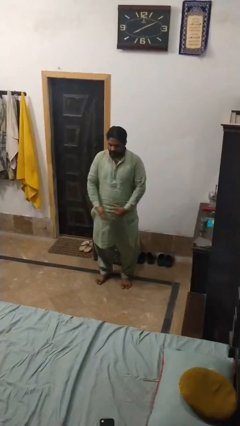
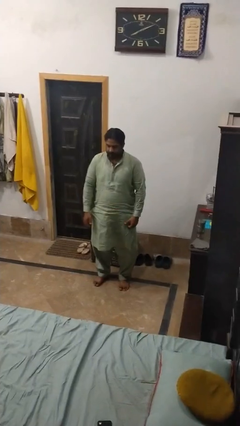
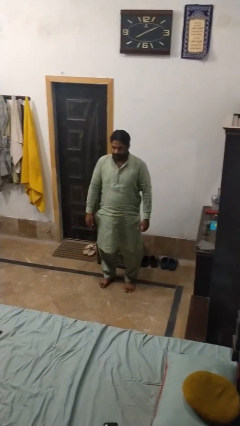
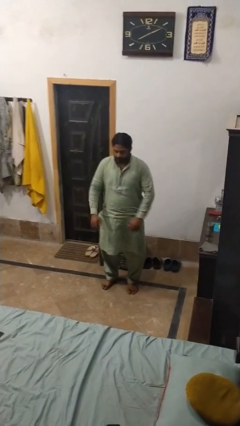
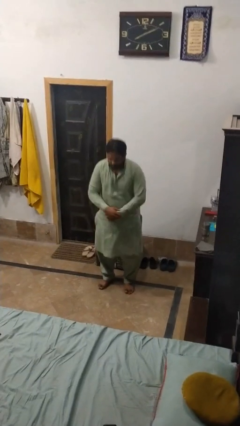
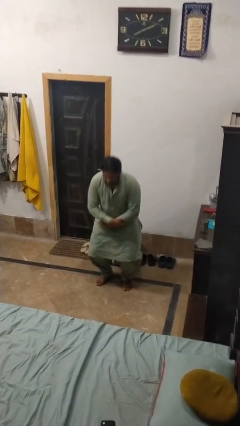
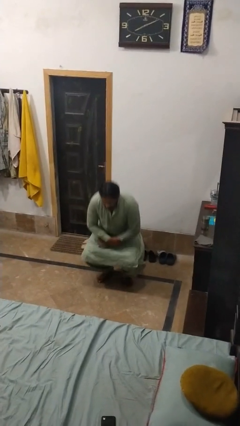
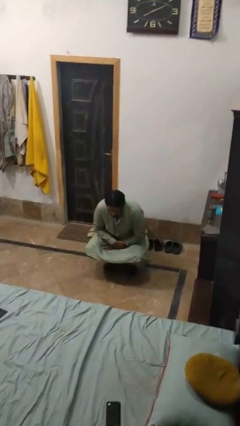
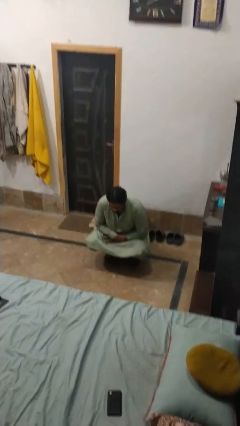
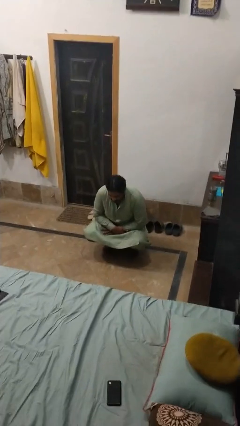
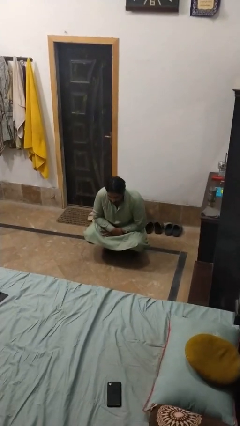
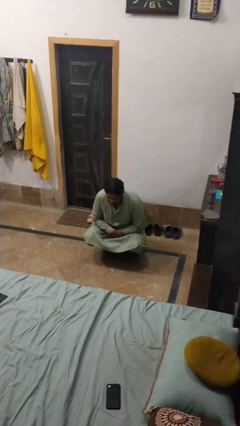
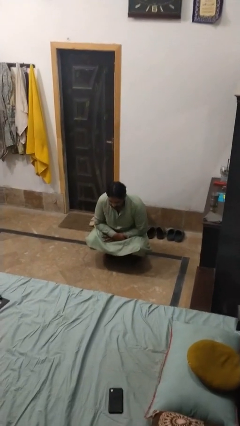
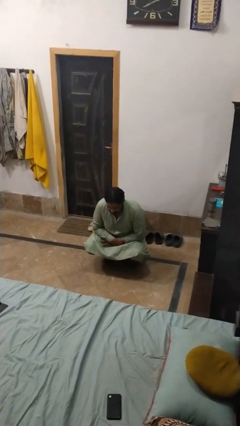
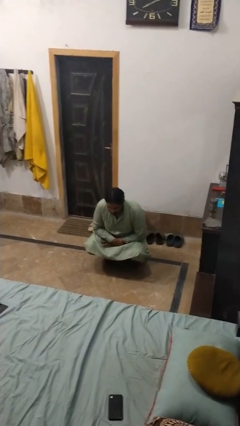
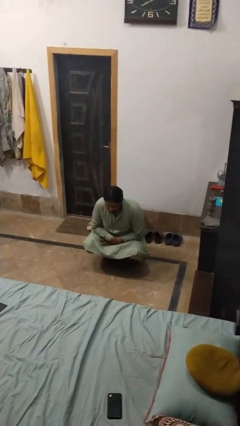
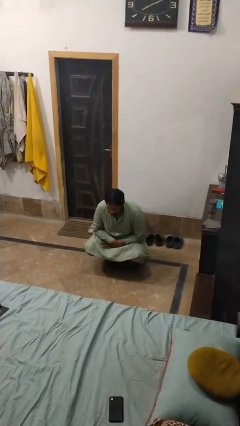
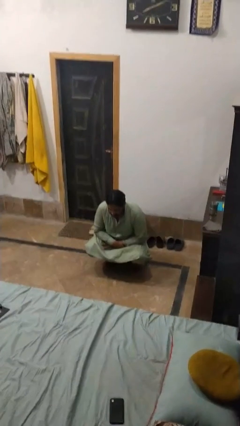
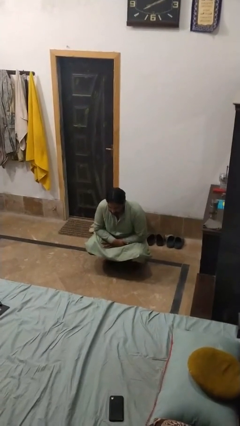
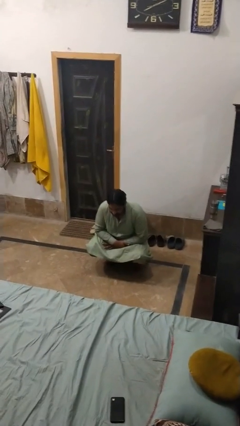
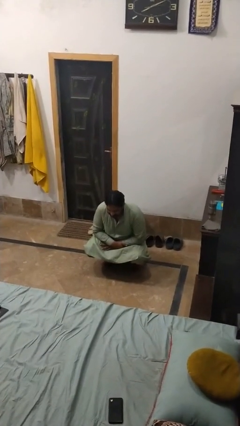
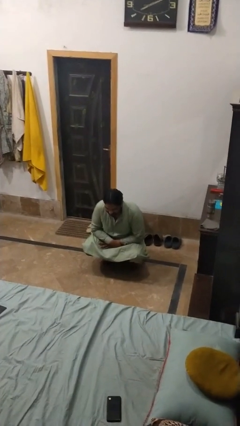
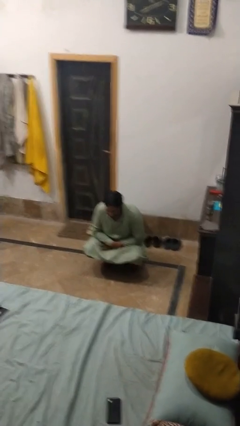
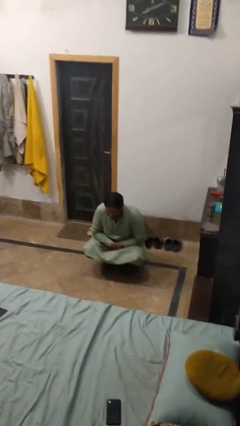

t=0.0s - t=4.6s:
person squats

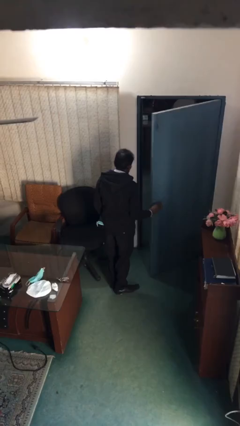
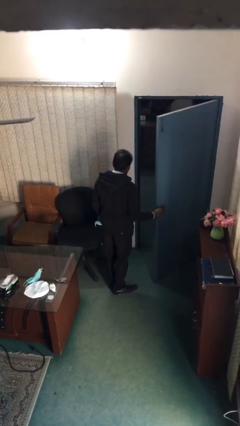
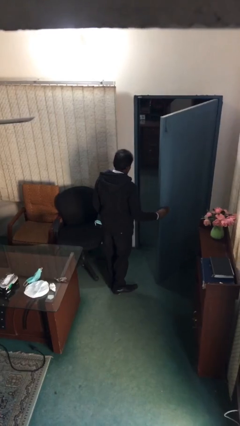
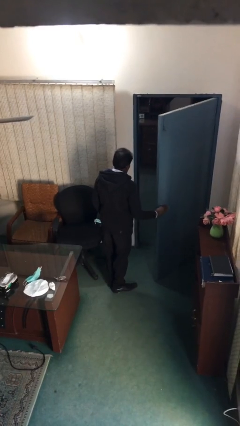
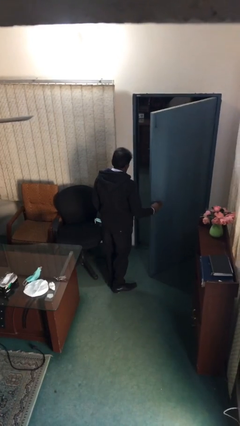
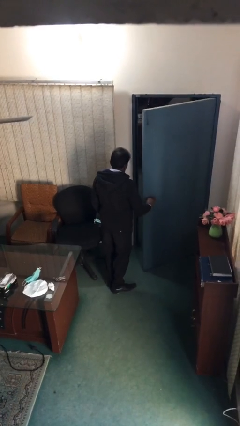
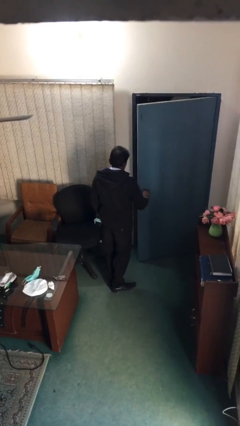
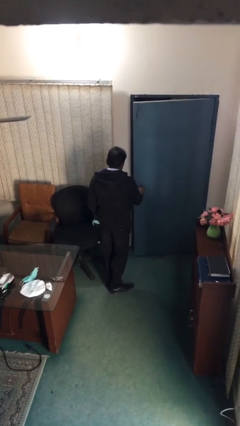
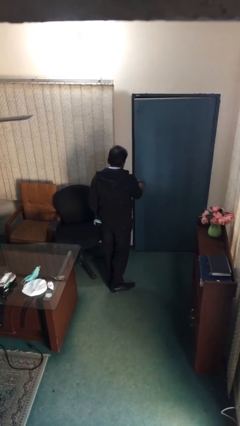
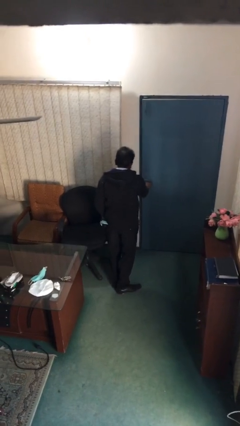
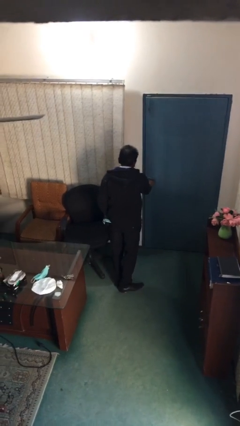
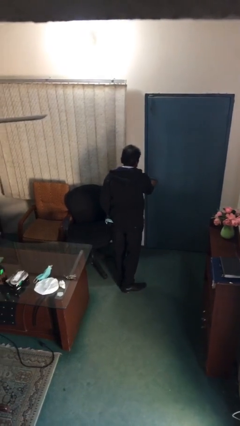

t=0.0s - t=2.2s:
person closes facility door

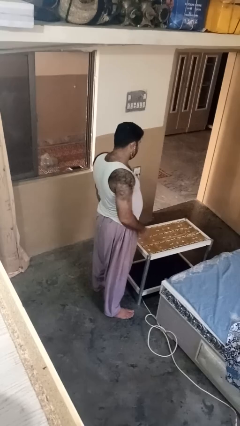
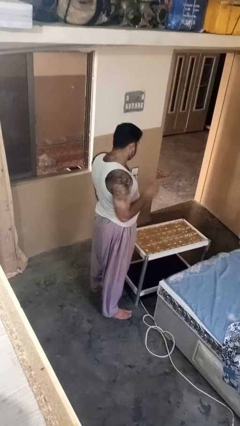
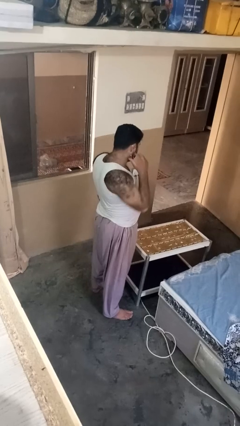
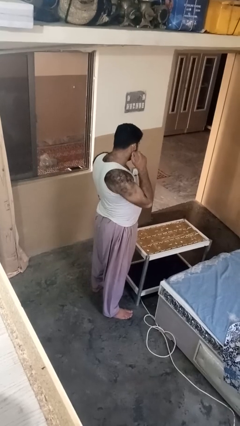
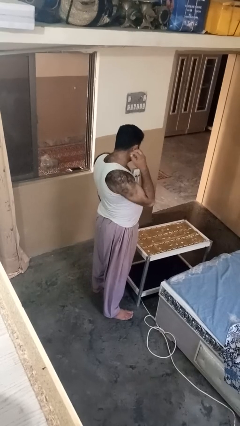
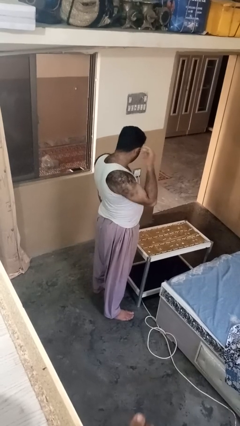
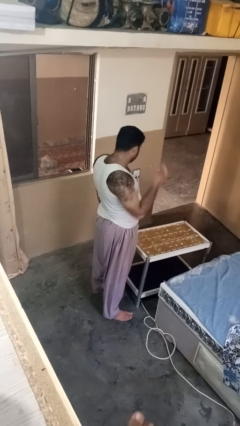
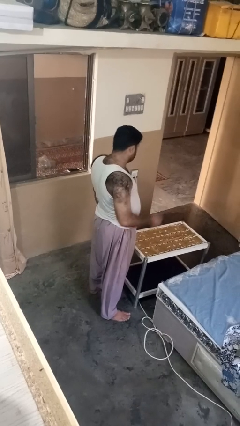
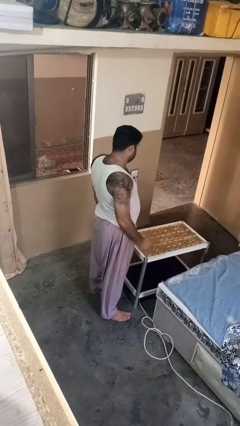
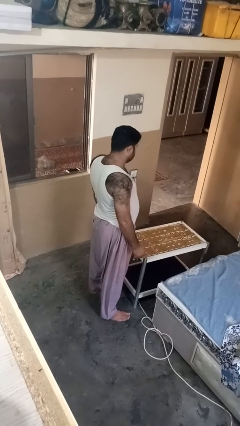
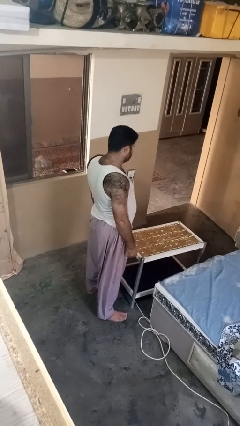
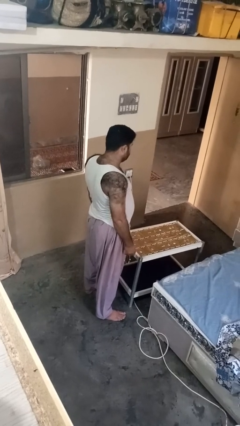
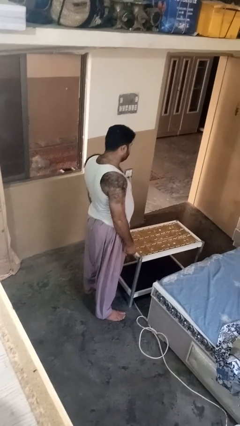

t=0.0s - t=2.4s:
person takes off earrings

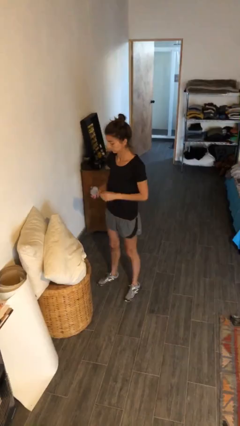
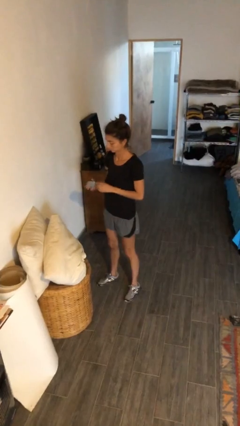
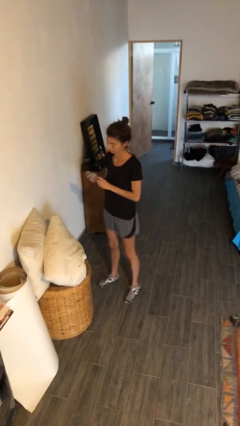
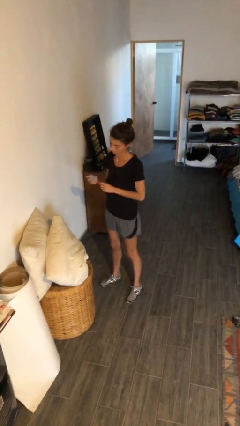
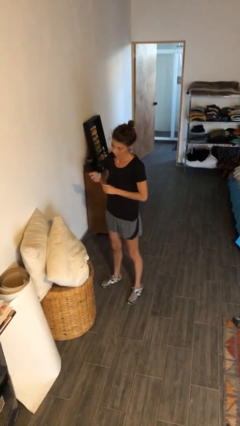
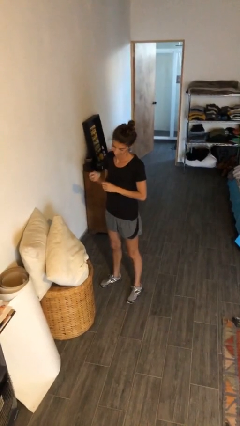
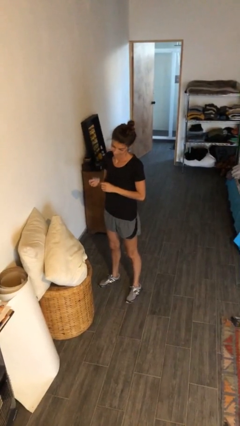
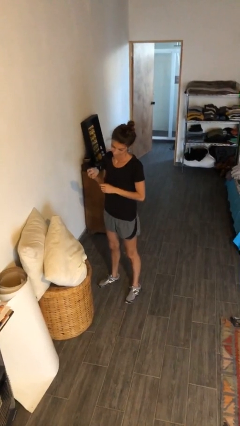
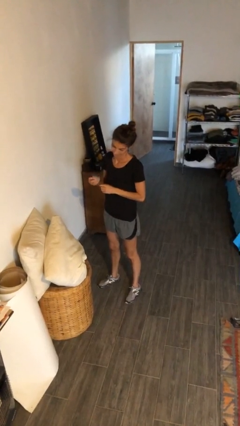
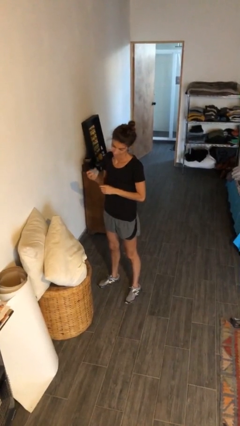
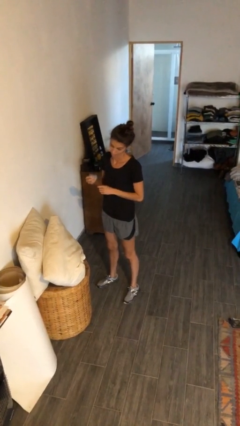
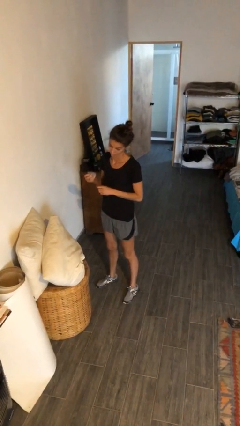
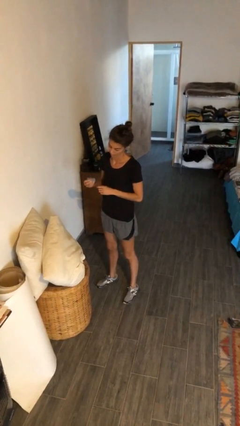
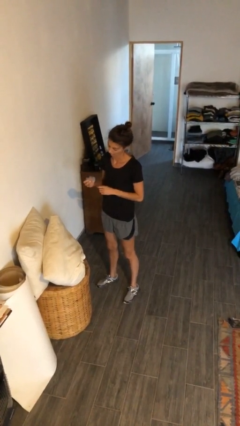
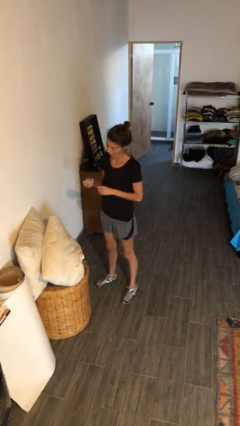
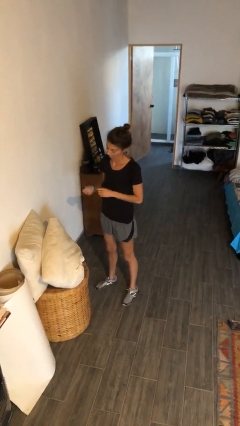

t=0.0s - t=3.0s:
person squeezes object

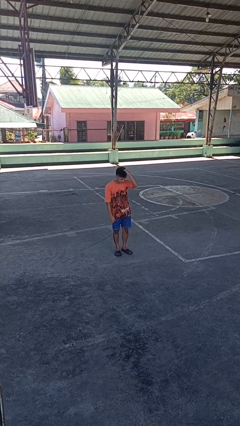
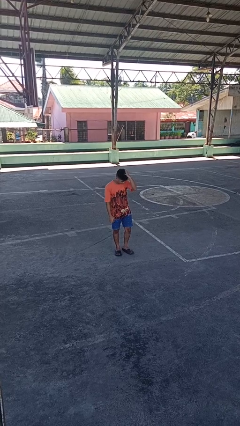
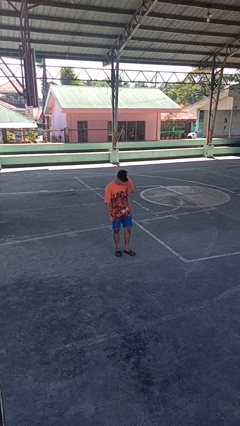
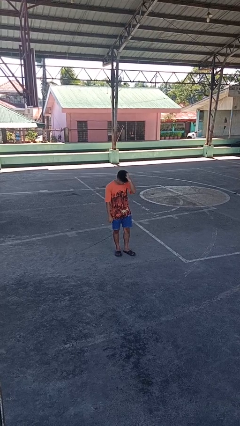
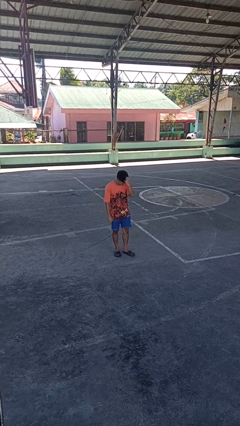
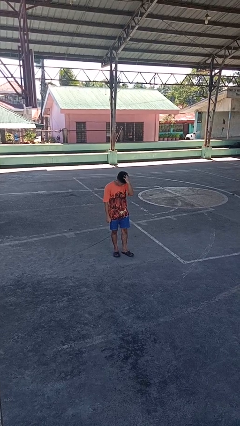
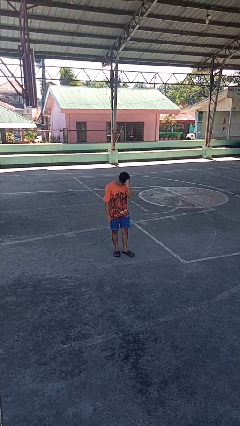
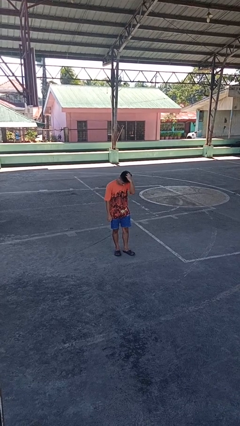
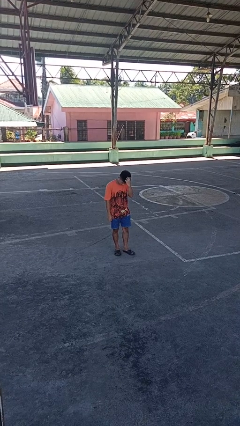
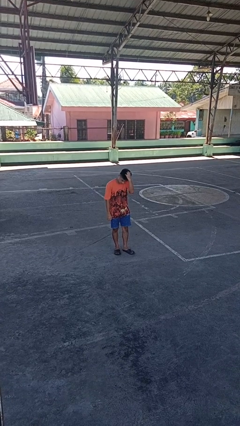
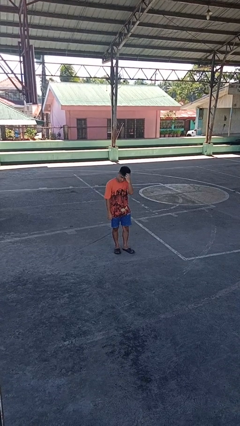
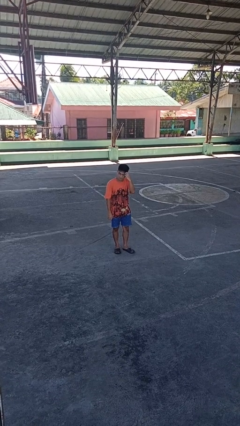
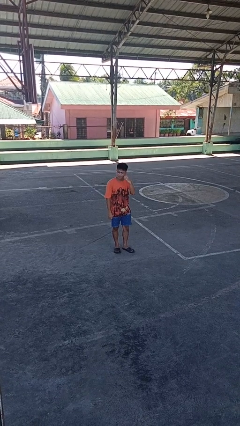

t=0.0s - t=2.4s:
person scratches face

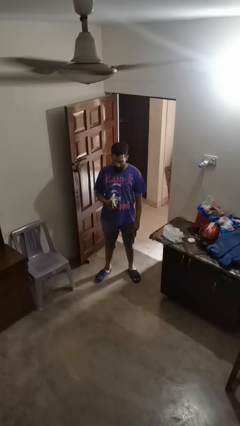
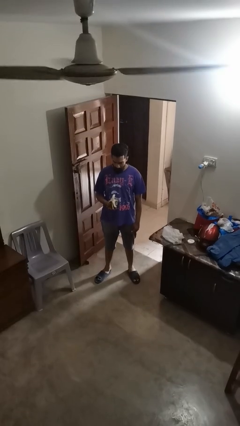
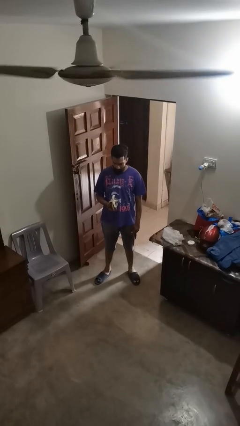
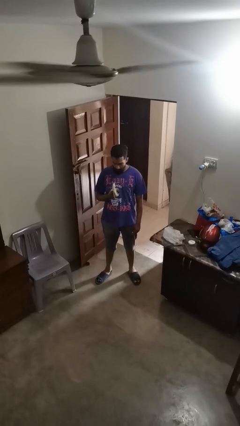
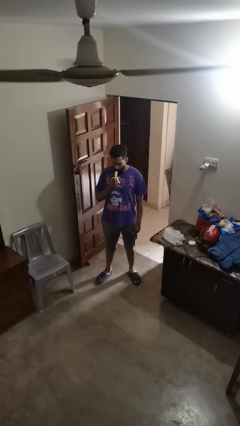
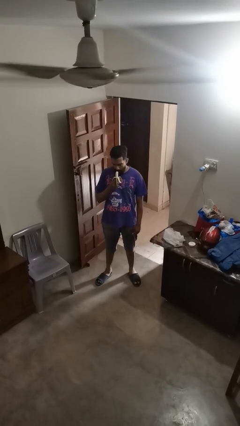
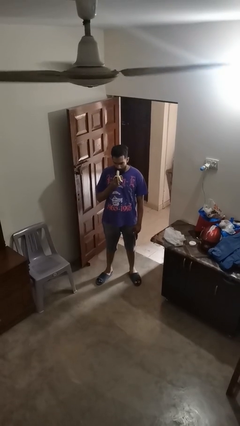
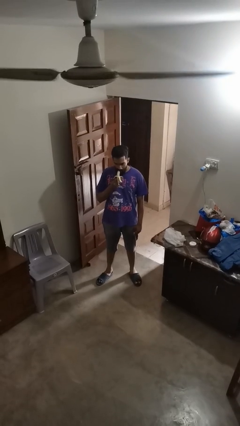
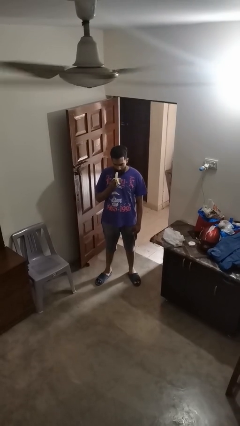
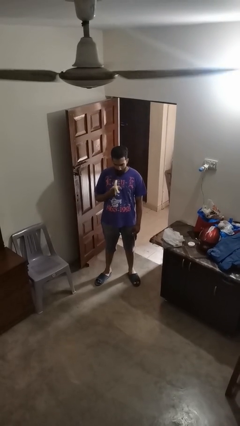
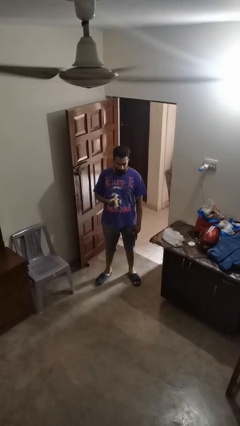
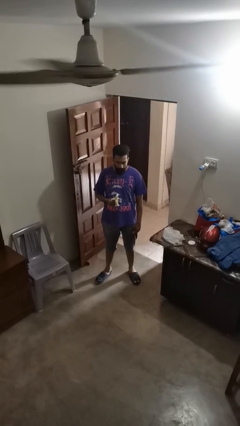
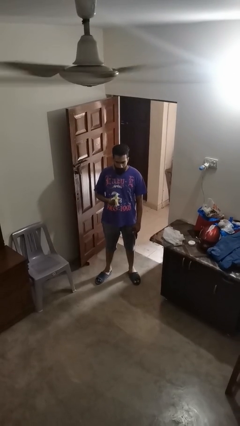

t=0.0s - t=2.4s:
person eats banana

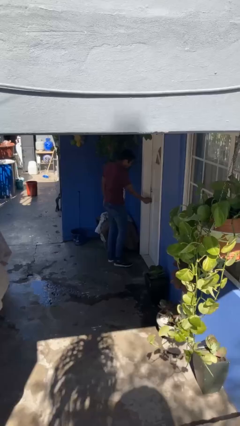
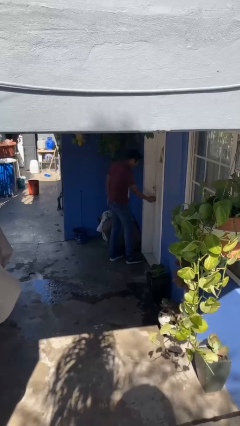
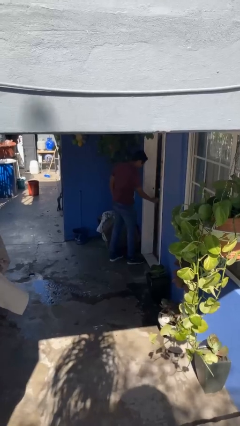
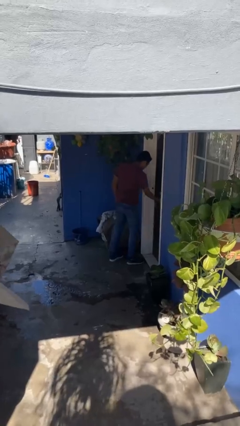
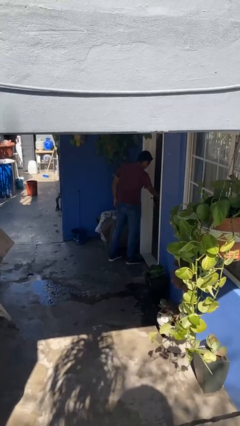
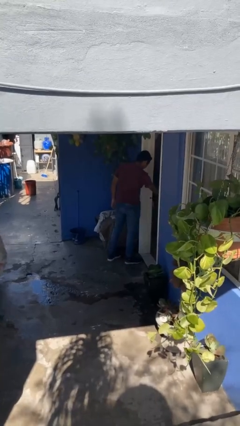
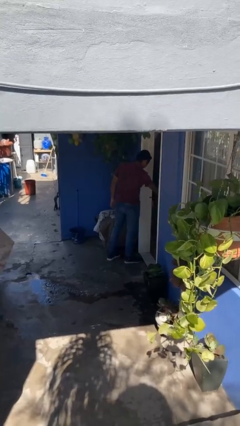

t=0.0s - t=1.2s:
person opens facility door
